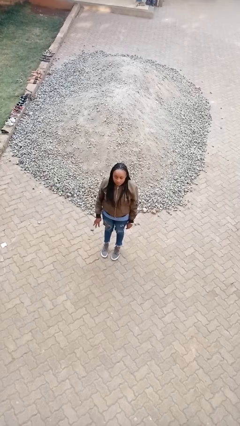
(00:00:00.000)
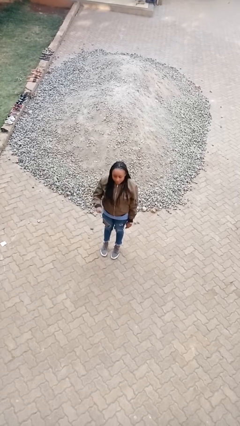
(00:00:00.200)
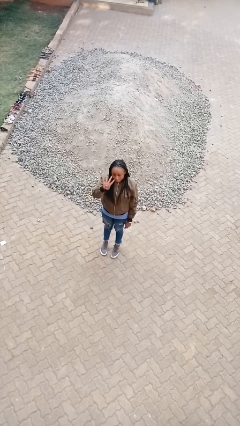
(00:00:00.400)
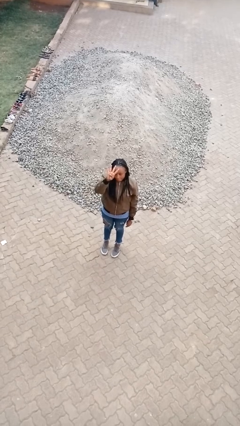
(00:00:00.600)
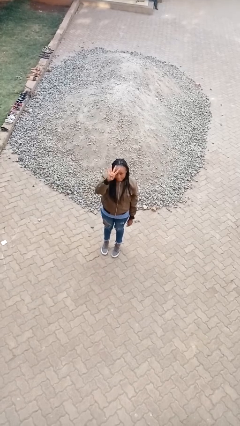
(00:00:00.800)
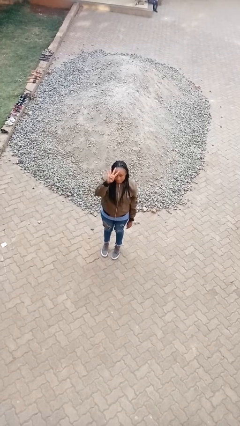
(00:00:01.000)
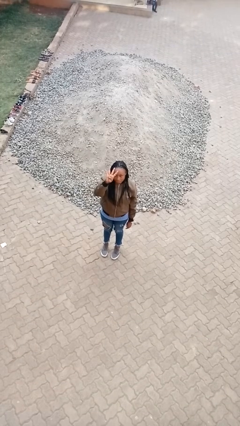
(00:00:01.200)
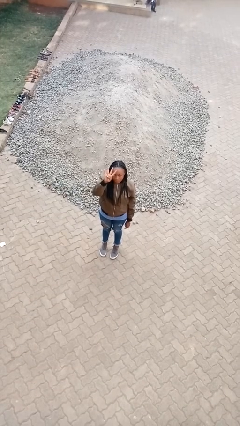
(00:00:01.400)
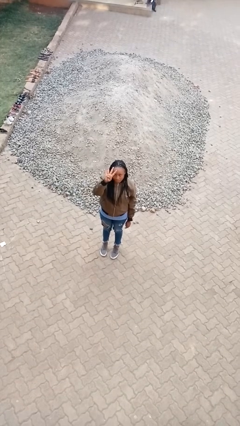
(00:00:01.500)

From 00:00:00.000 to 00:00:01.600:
person gestures number four

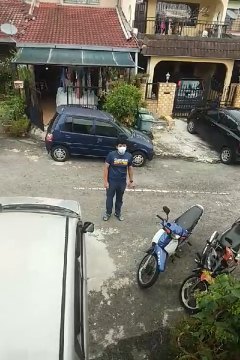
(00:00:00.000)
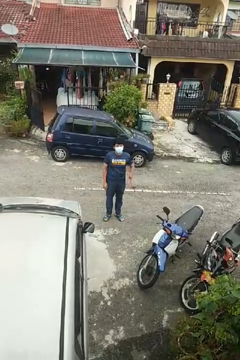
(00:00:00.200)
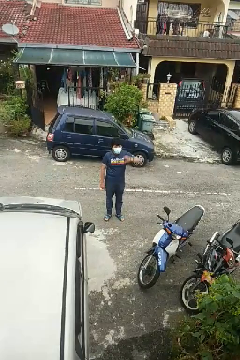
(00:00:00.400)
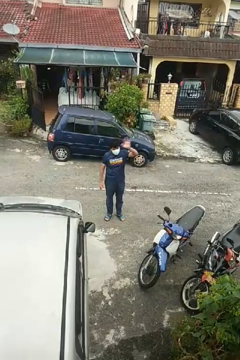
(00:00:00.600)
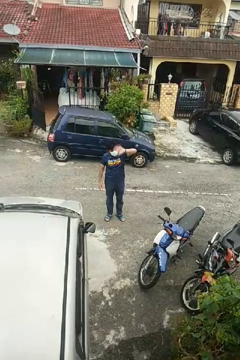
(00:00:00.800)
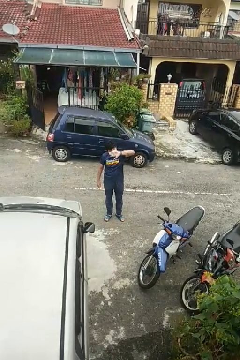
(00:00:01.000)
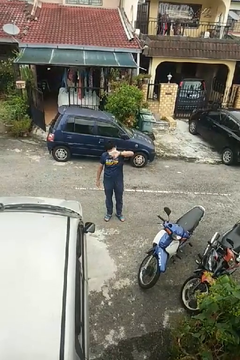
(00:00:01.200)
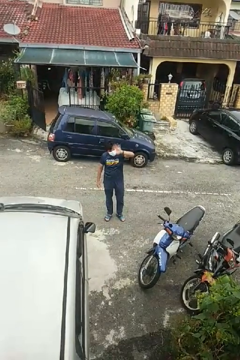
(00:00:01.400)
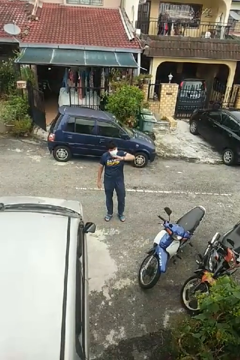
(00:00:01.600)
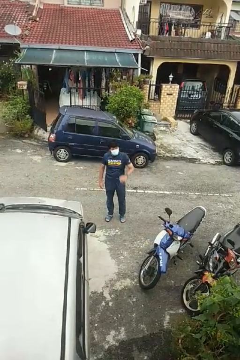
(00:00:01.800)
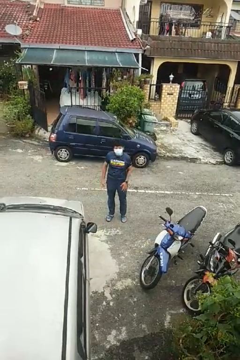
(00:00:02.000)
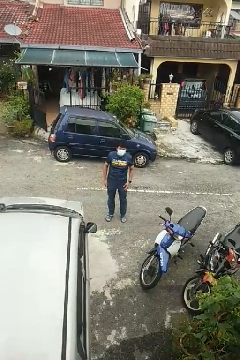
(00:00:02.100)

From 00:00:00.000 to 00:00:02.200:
person waves at person

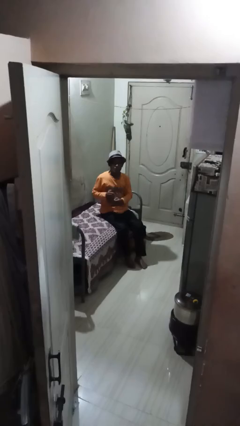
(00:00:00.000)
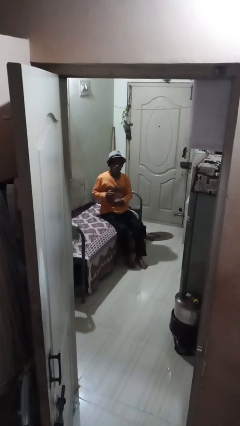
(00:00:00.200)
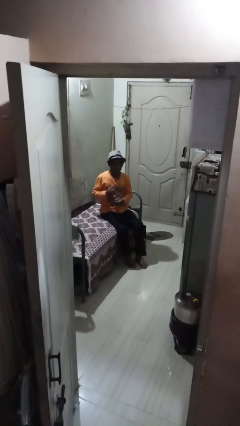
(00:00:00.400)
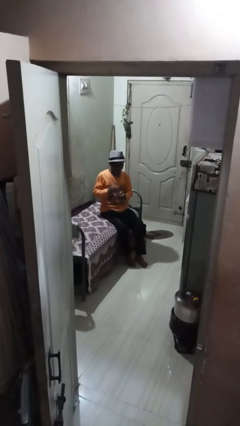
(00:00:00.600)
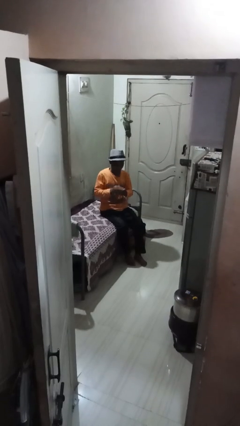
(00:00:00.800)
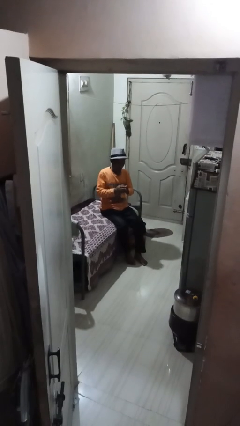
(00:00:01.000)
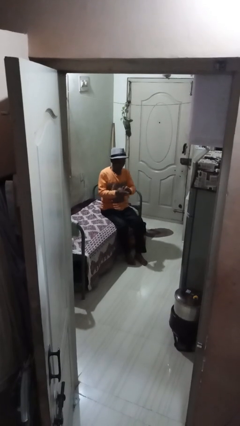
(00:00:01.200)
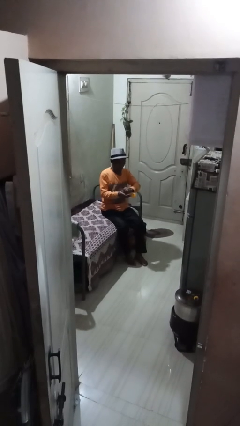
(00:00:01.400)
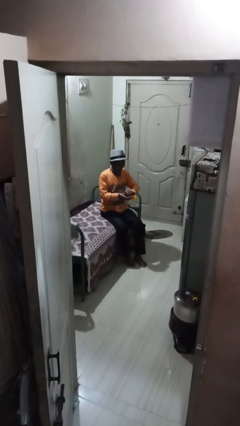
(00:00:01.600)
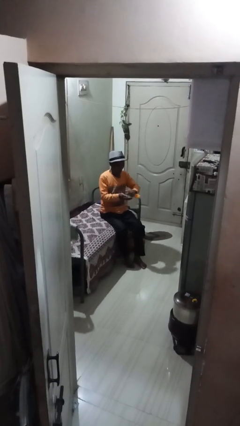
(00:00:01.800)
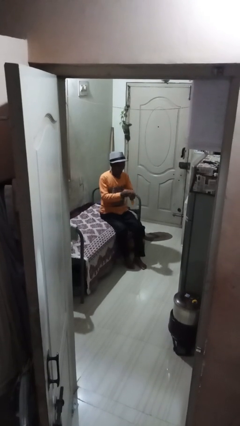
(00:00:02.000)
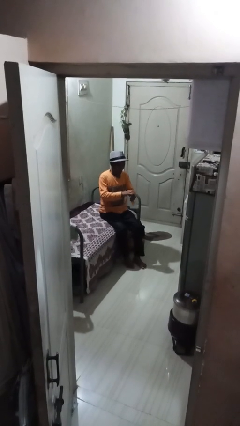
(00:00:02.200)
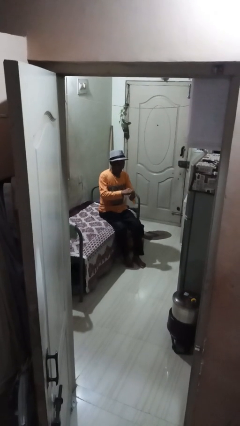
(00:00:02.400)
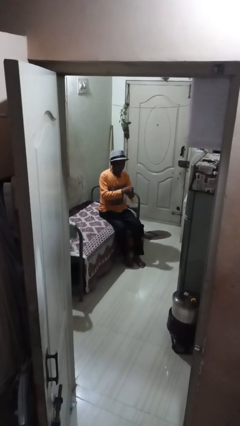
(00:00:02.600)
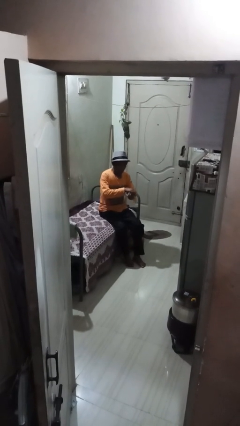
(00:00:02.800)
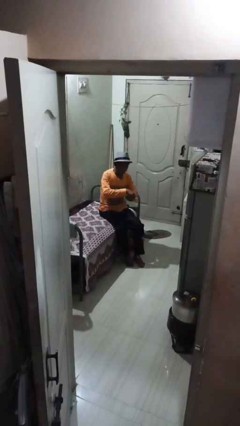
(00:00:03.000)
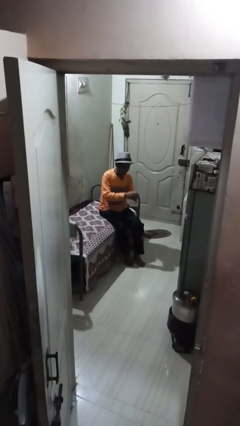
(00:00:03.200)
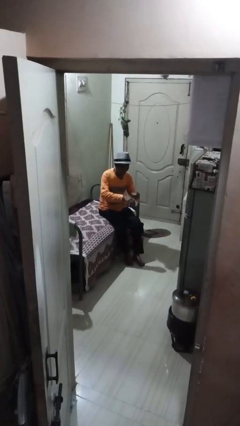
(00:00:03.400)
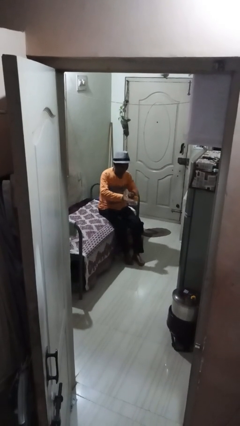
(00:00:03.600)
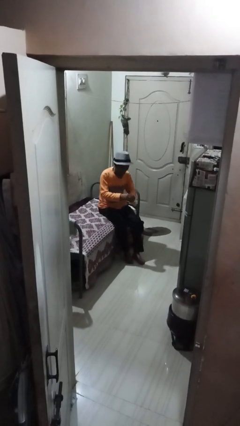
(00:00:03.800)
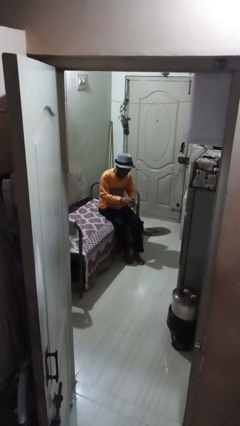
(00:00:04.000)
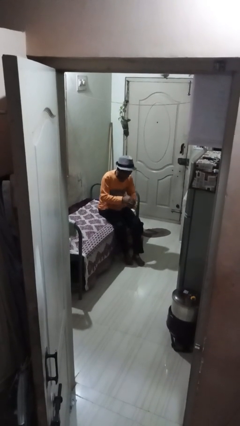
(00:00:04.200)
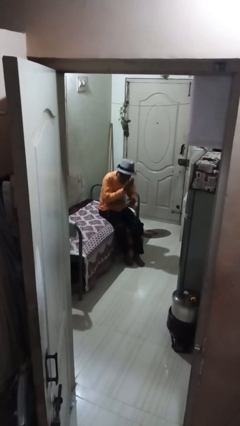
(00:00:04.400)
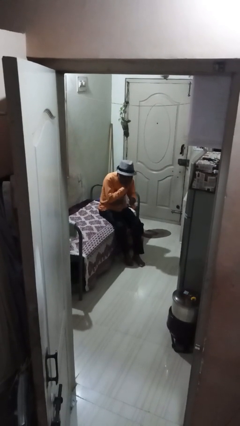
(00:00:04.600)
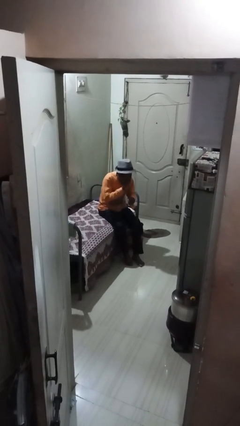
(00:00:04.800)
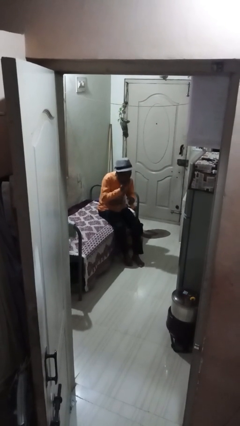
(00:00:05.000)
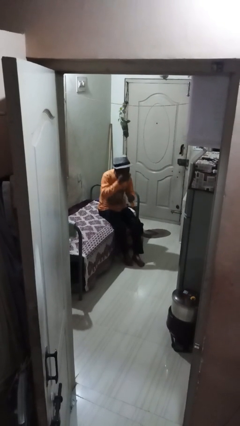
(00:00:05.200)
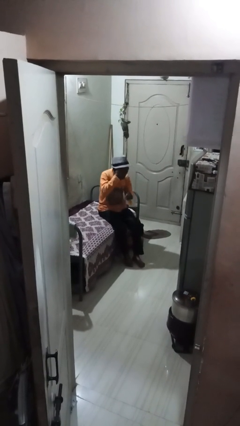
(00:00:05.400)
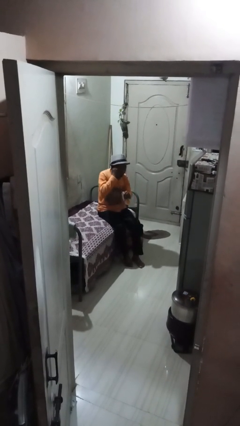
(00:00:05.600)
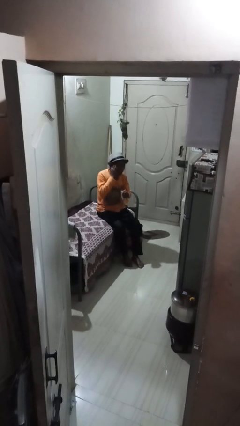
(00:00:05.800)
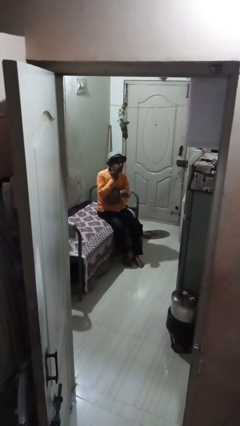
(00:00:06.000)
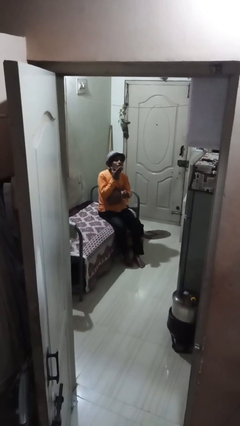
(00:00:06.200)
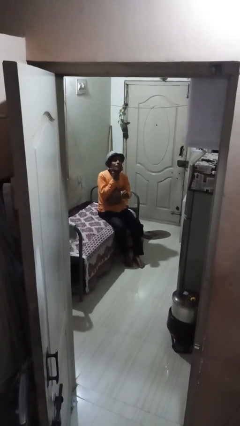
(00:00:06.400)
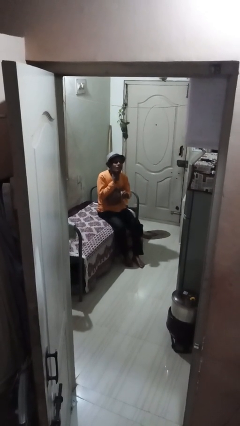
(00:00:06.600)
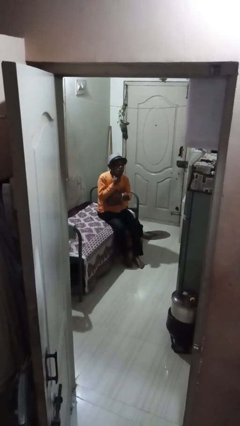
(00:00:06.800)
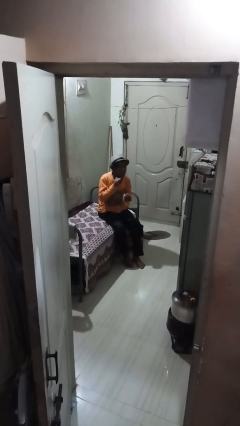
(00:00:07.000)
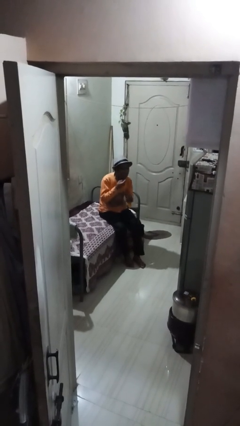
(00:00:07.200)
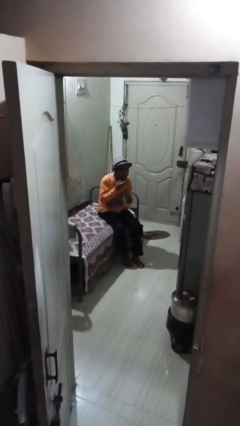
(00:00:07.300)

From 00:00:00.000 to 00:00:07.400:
person applies sunscreen

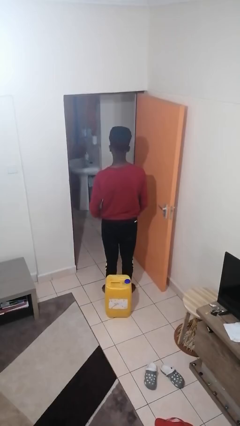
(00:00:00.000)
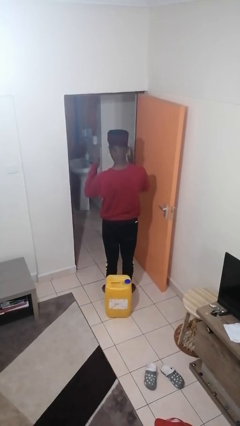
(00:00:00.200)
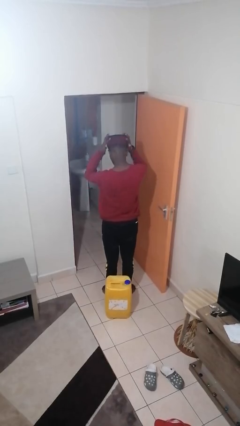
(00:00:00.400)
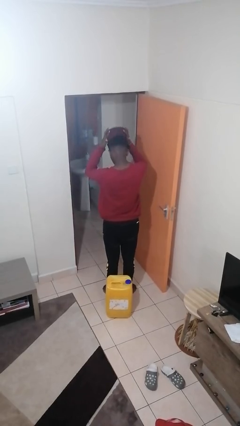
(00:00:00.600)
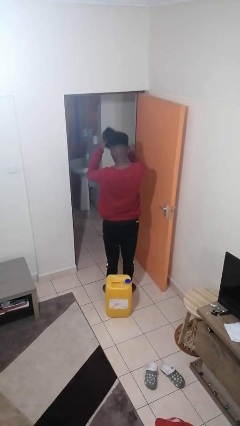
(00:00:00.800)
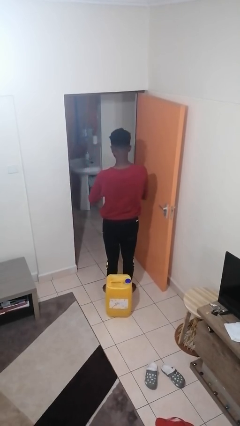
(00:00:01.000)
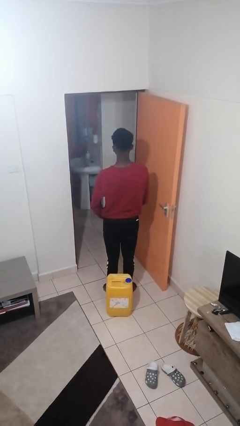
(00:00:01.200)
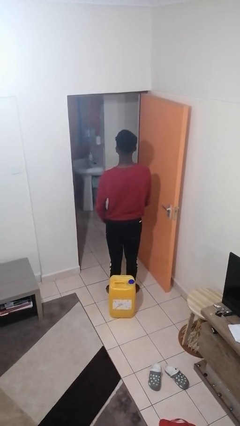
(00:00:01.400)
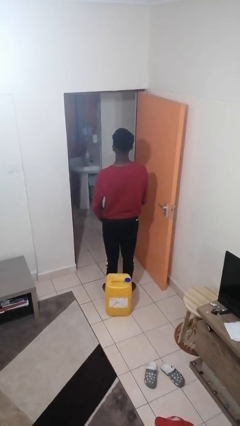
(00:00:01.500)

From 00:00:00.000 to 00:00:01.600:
person takes off hat

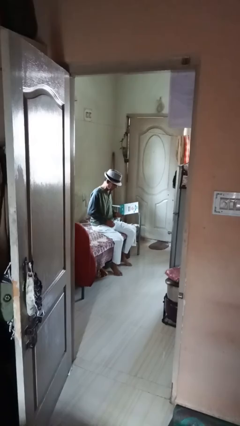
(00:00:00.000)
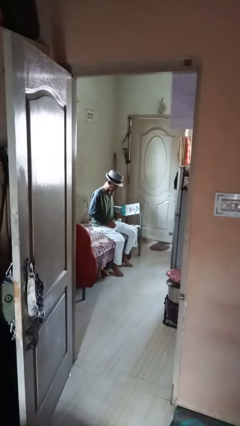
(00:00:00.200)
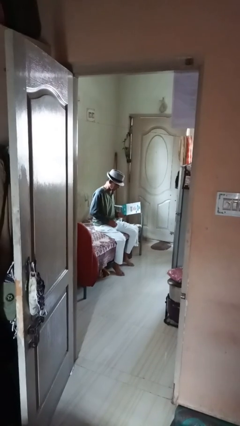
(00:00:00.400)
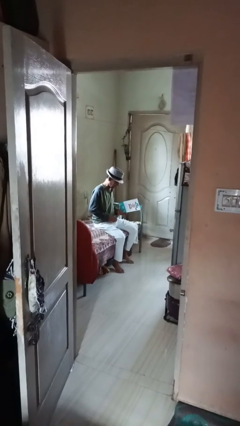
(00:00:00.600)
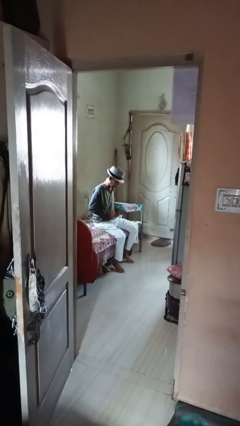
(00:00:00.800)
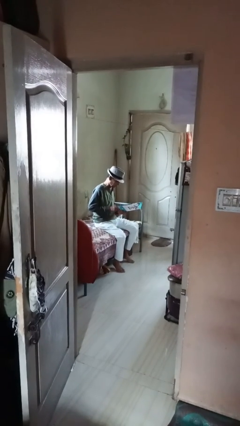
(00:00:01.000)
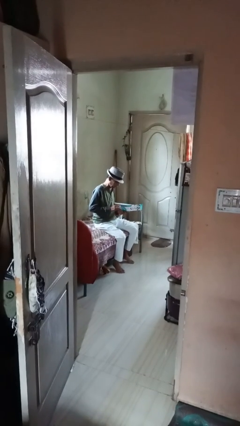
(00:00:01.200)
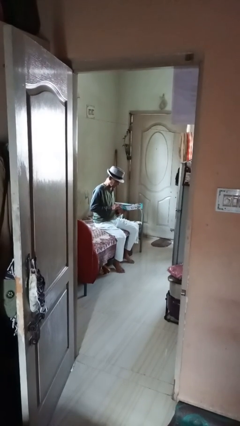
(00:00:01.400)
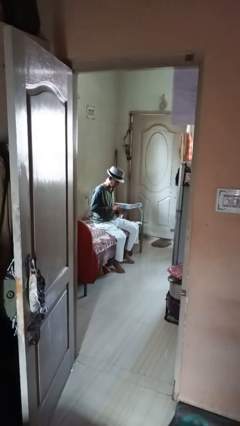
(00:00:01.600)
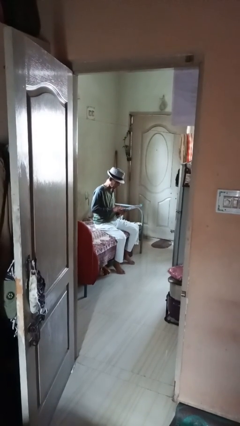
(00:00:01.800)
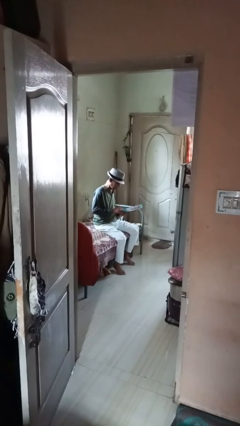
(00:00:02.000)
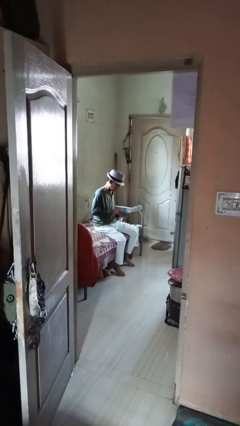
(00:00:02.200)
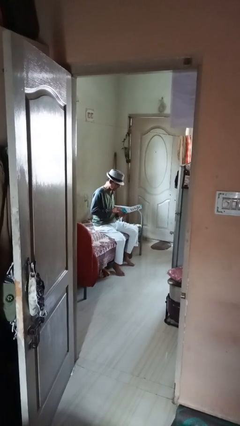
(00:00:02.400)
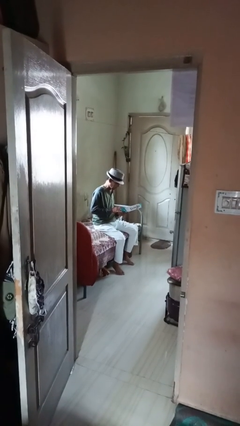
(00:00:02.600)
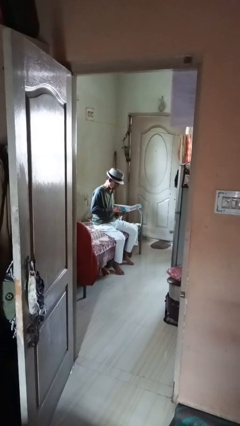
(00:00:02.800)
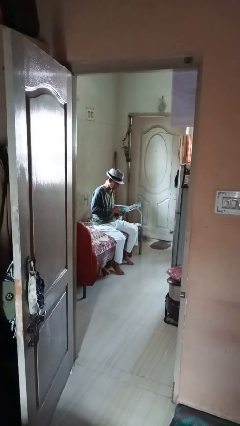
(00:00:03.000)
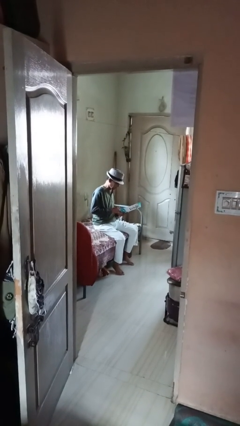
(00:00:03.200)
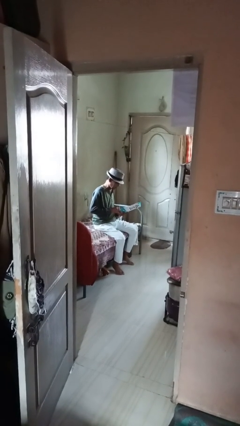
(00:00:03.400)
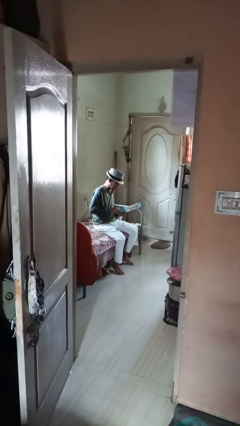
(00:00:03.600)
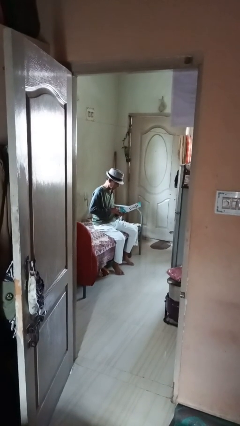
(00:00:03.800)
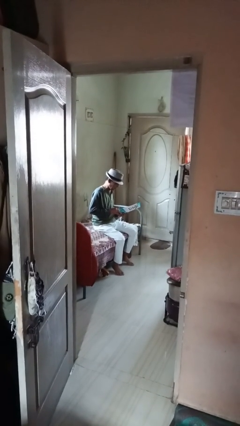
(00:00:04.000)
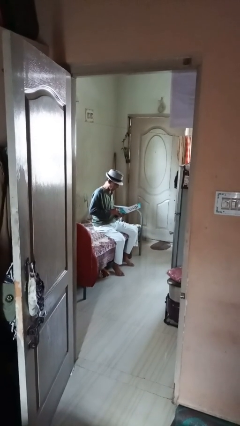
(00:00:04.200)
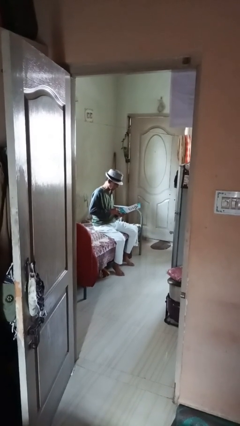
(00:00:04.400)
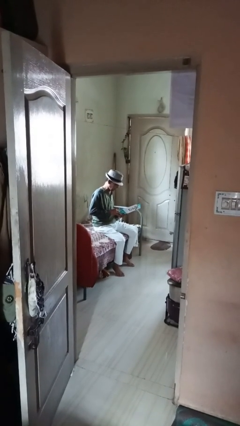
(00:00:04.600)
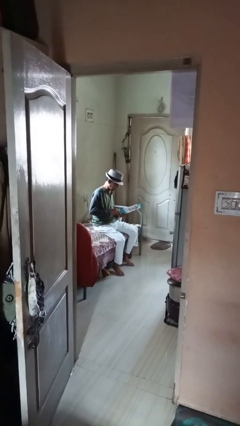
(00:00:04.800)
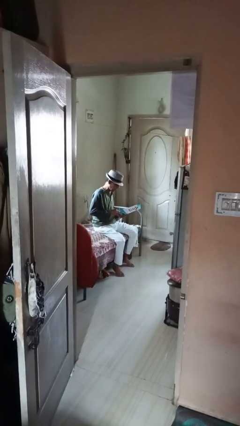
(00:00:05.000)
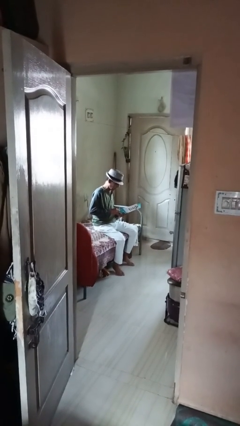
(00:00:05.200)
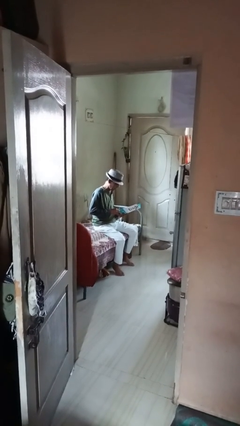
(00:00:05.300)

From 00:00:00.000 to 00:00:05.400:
person reads magazine
